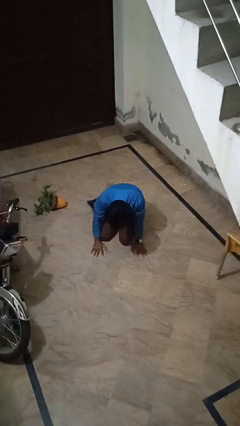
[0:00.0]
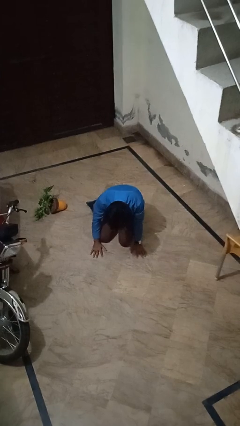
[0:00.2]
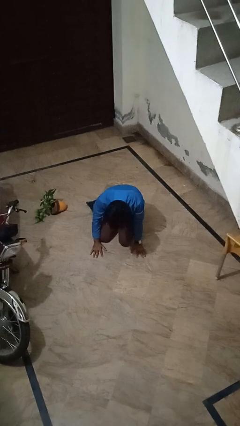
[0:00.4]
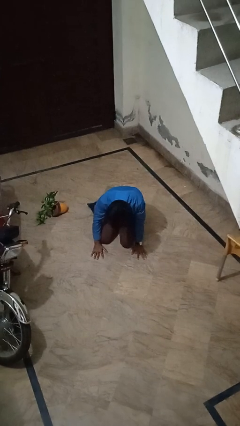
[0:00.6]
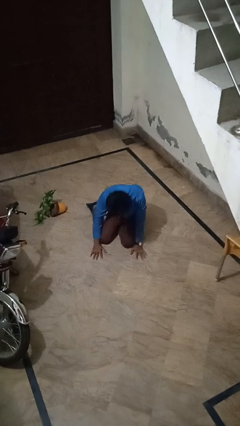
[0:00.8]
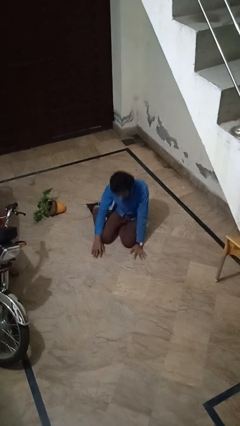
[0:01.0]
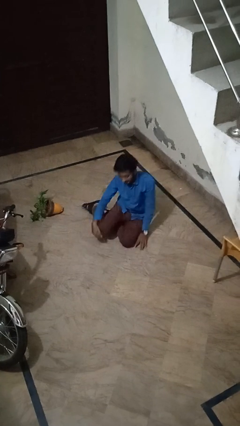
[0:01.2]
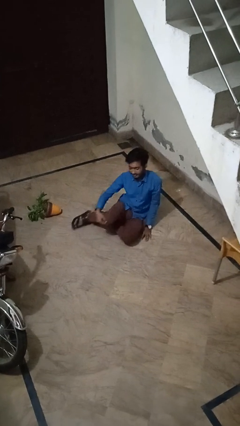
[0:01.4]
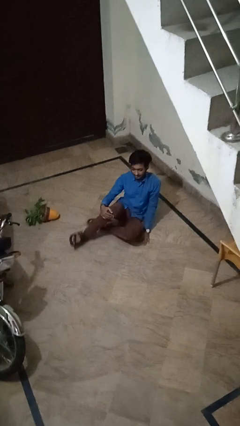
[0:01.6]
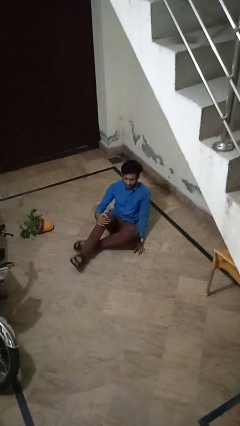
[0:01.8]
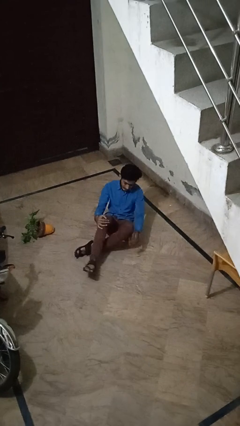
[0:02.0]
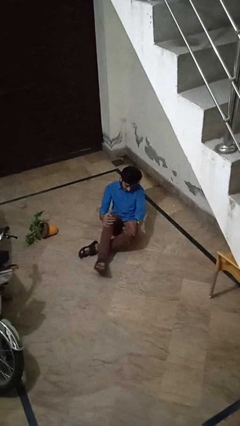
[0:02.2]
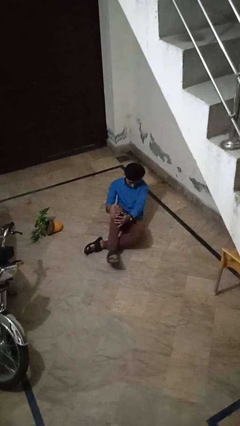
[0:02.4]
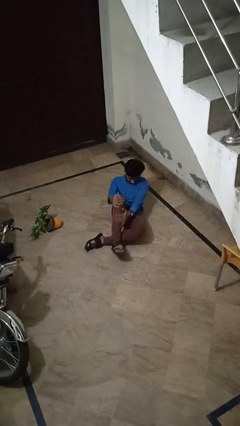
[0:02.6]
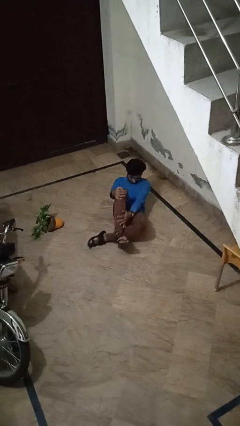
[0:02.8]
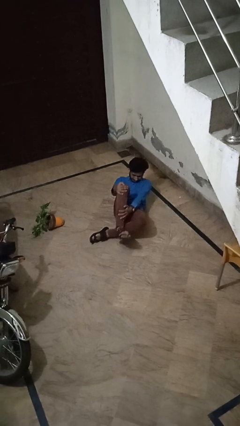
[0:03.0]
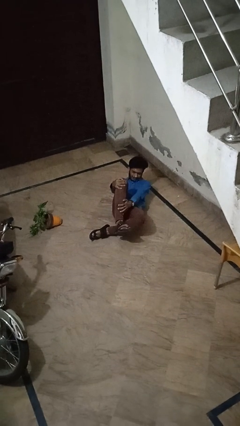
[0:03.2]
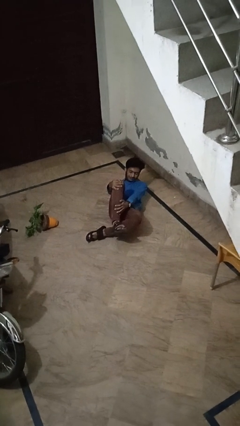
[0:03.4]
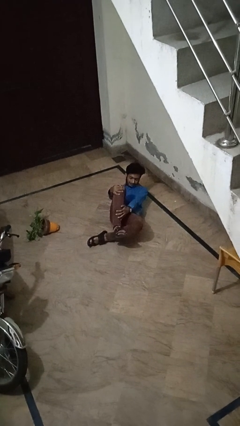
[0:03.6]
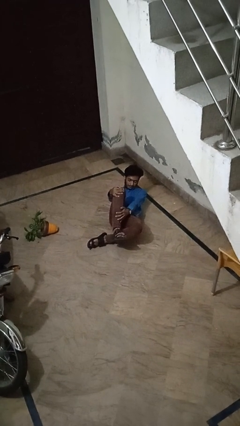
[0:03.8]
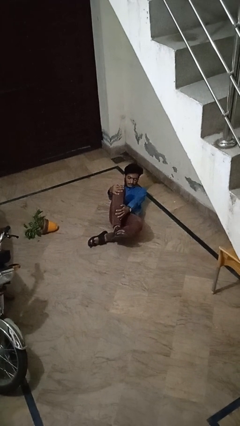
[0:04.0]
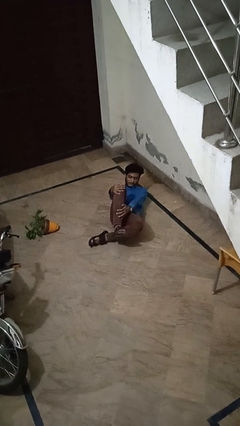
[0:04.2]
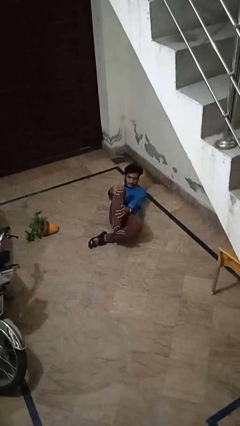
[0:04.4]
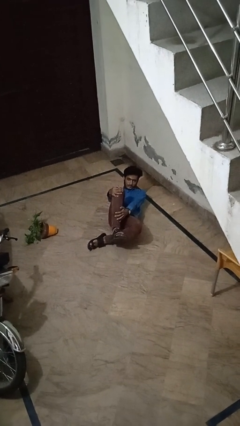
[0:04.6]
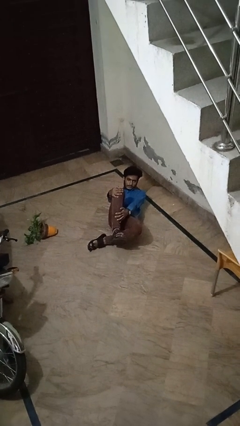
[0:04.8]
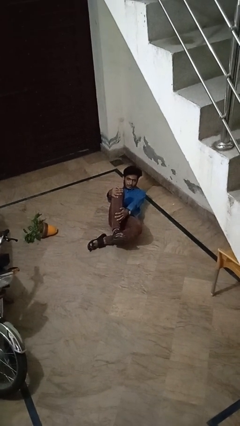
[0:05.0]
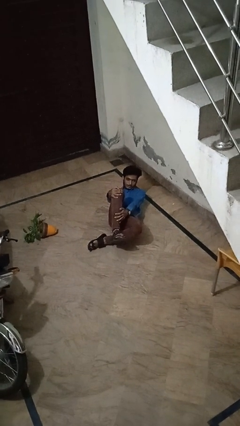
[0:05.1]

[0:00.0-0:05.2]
person lies down on floor

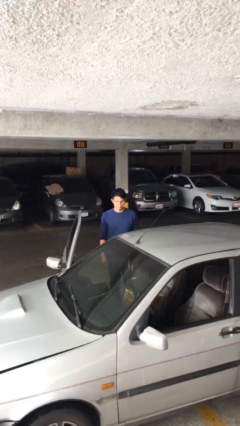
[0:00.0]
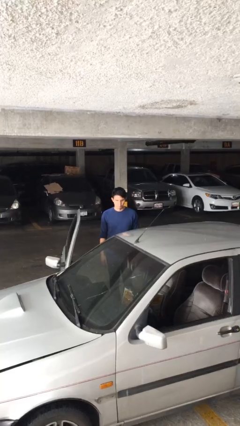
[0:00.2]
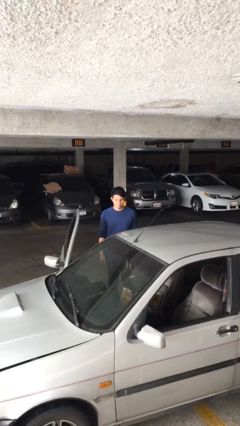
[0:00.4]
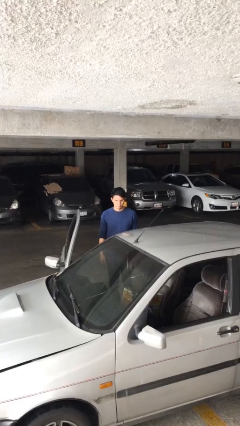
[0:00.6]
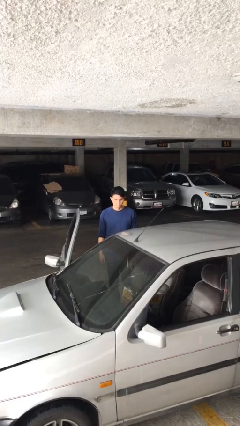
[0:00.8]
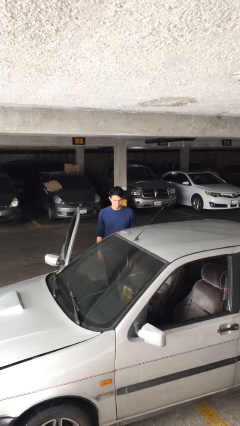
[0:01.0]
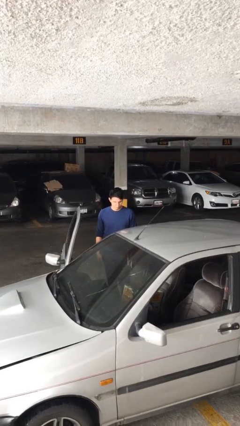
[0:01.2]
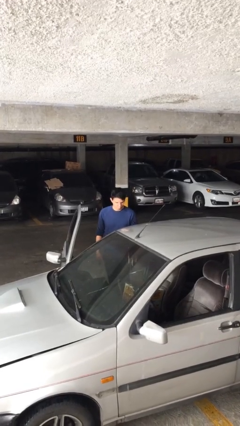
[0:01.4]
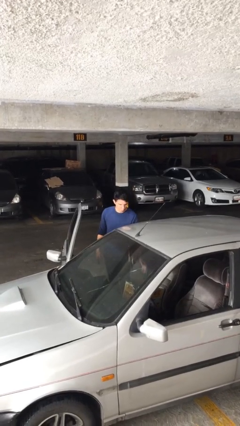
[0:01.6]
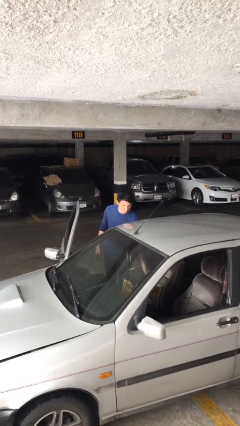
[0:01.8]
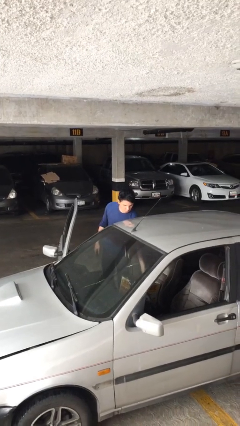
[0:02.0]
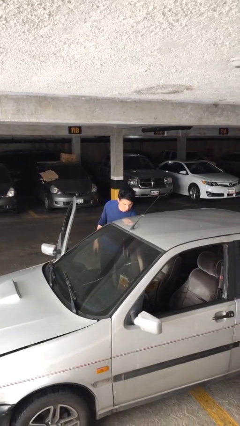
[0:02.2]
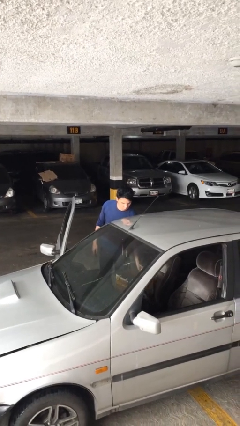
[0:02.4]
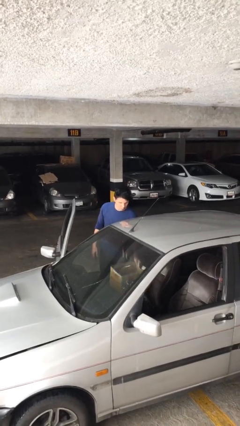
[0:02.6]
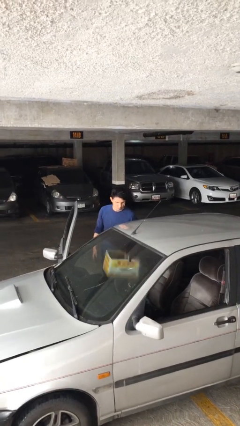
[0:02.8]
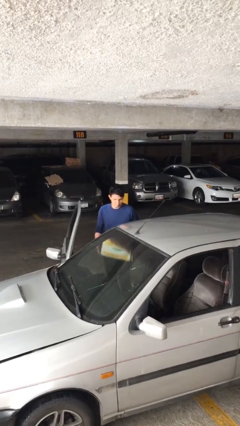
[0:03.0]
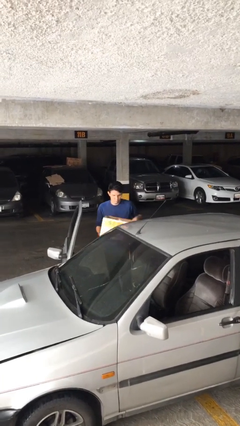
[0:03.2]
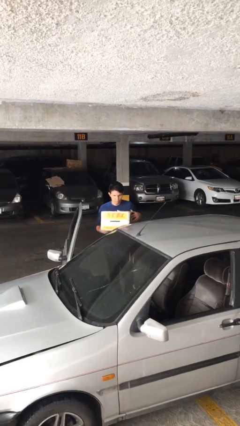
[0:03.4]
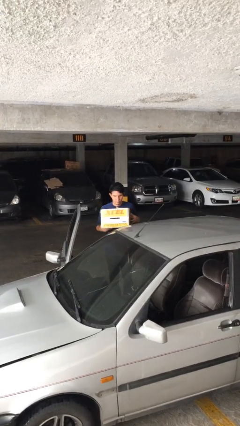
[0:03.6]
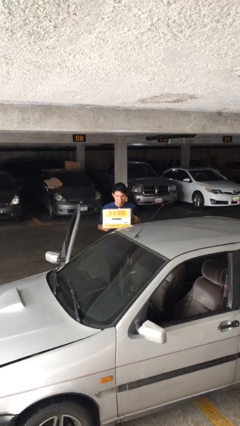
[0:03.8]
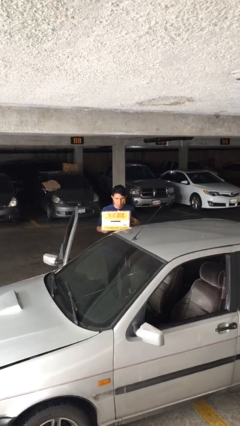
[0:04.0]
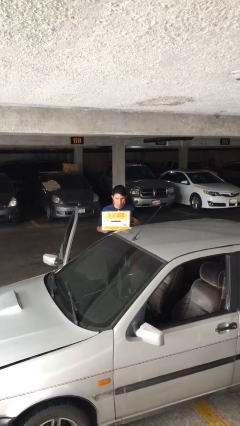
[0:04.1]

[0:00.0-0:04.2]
person unloads car

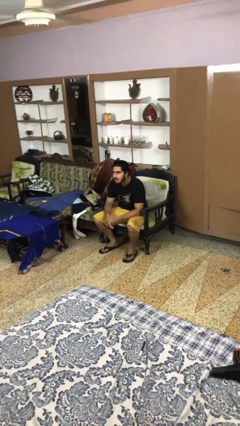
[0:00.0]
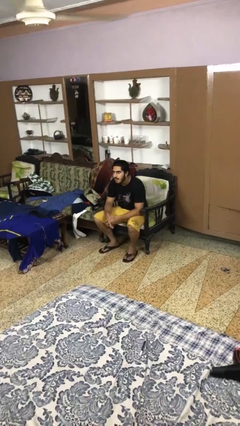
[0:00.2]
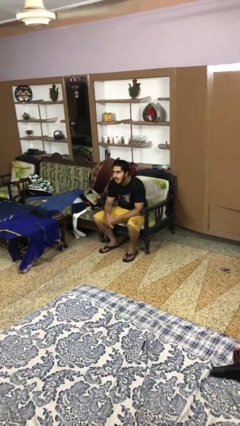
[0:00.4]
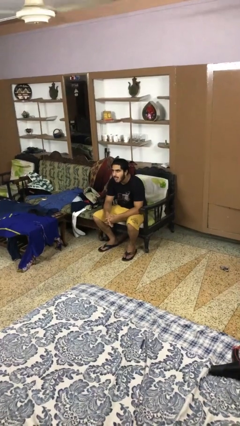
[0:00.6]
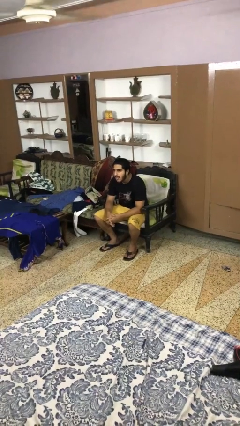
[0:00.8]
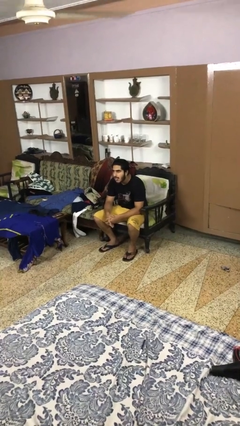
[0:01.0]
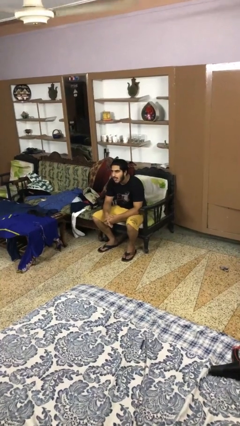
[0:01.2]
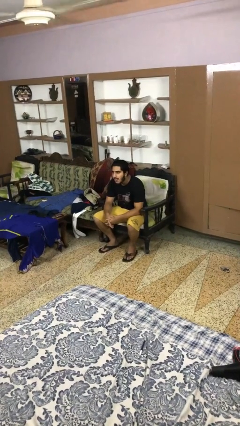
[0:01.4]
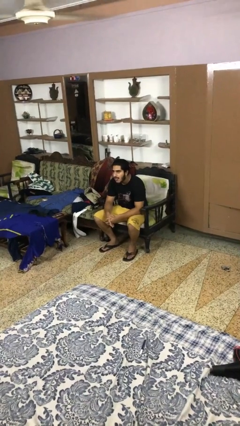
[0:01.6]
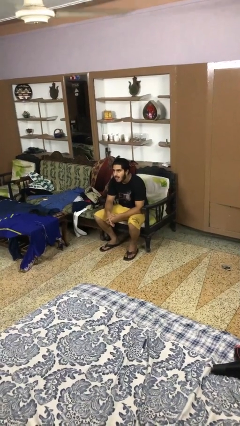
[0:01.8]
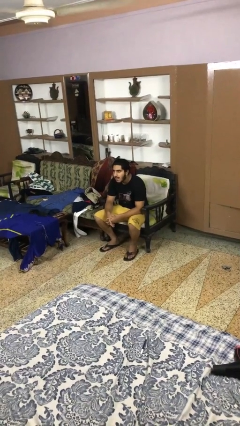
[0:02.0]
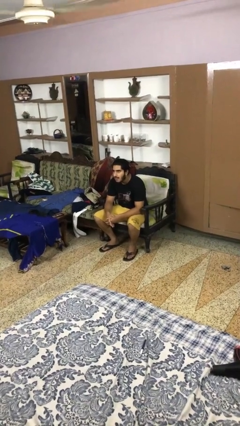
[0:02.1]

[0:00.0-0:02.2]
person sticks out tongue

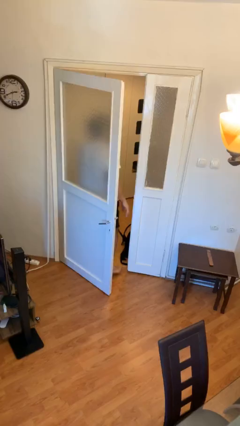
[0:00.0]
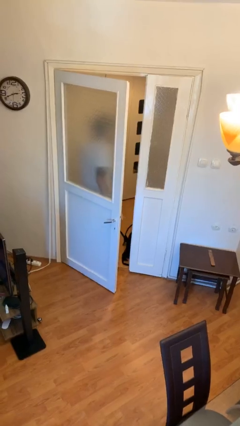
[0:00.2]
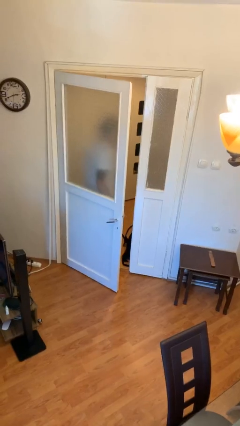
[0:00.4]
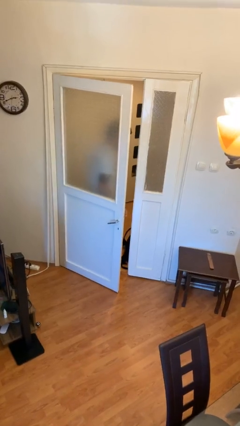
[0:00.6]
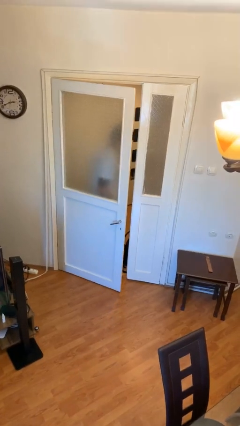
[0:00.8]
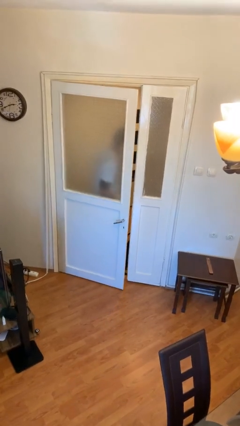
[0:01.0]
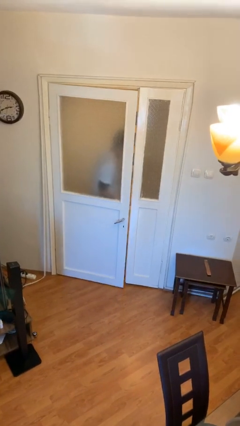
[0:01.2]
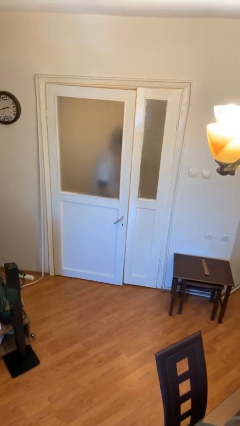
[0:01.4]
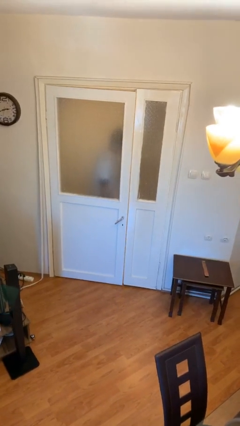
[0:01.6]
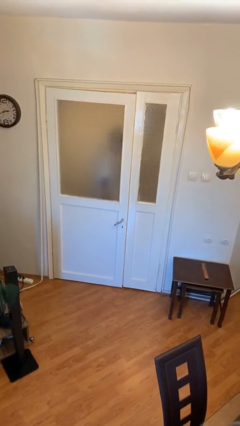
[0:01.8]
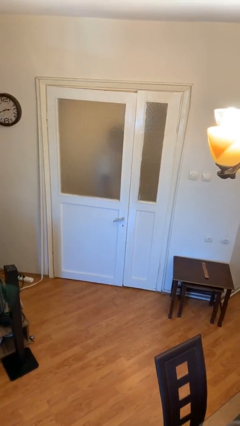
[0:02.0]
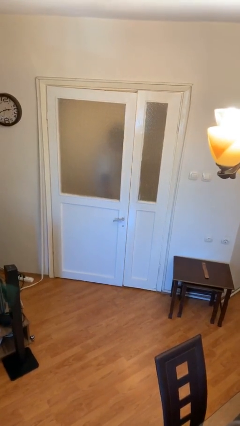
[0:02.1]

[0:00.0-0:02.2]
person closes facility door

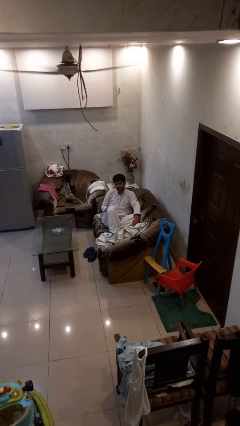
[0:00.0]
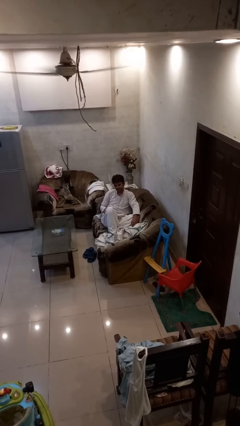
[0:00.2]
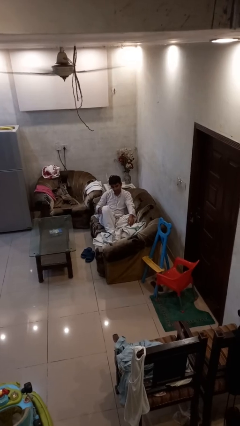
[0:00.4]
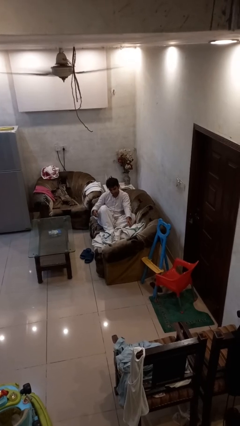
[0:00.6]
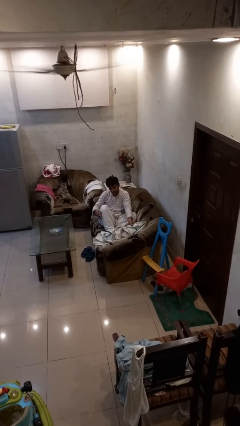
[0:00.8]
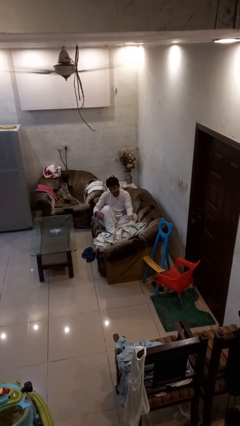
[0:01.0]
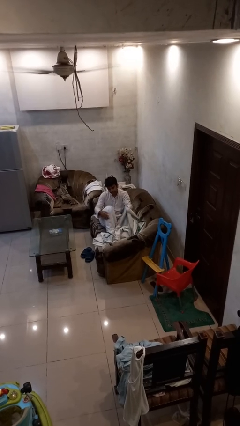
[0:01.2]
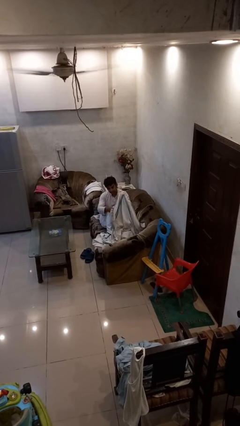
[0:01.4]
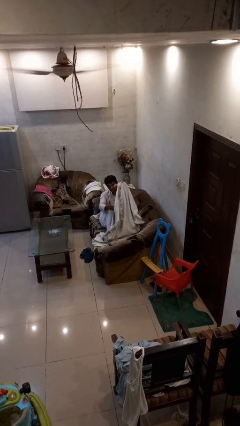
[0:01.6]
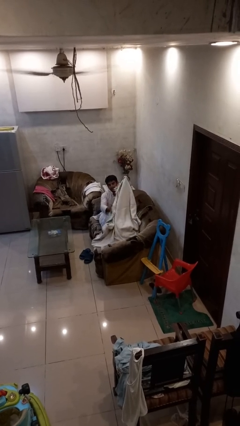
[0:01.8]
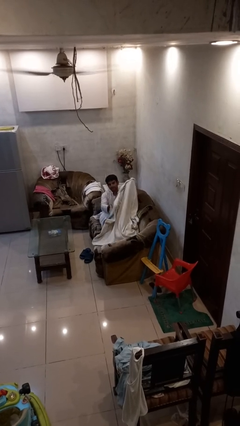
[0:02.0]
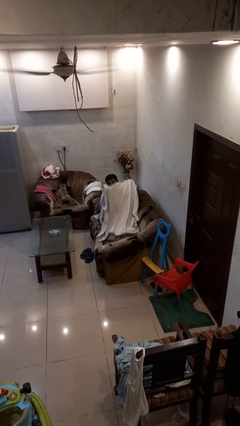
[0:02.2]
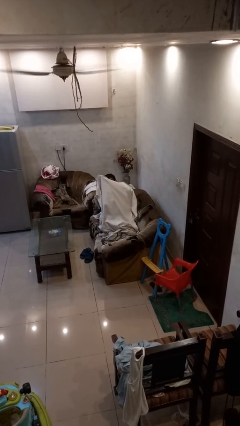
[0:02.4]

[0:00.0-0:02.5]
person covers with blanket

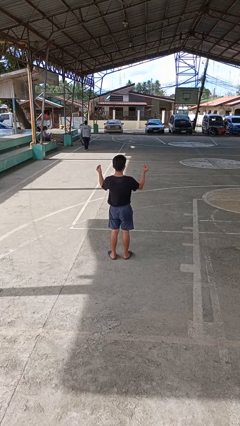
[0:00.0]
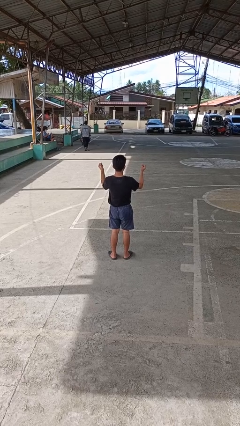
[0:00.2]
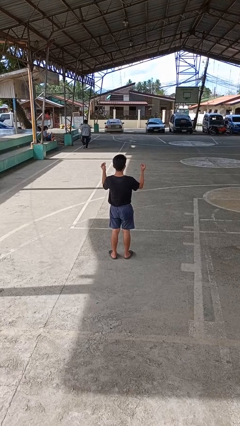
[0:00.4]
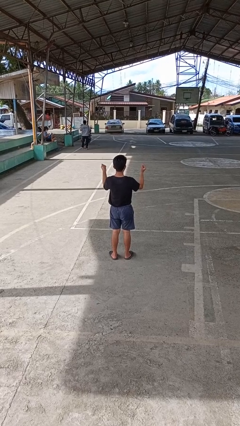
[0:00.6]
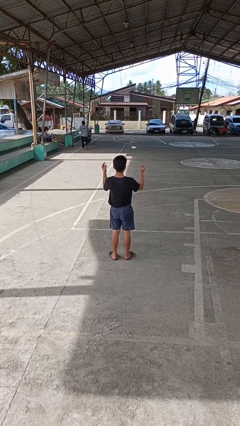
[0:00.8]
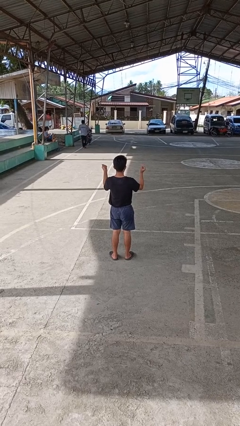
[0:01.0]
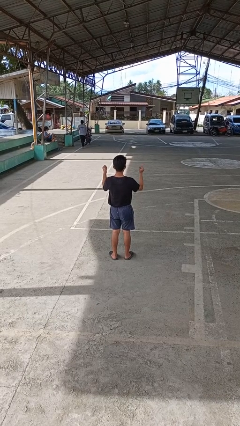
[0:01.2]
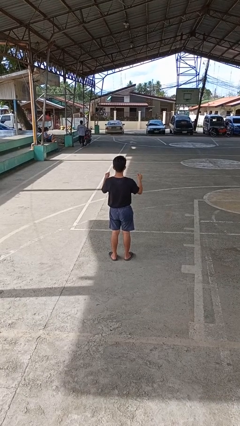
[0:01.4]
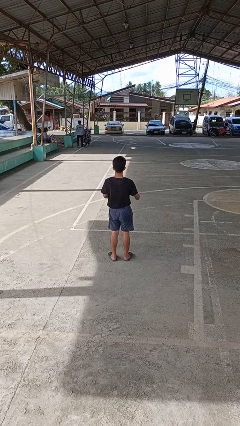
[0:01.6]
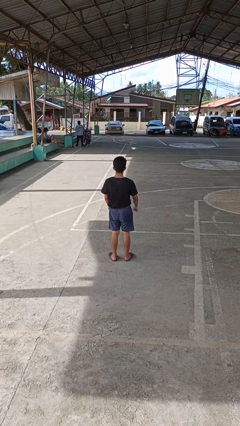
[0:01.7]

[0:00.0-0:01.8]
person snaps fingers
